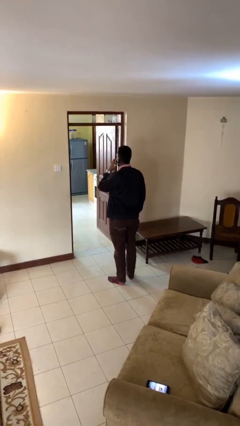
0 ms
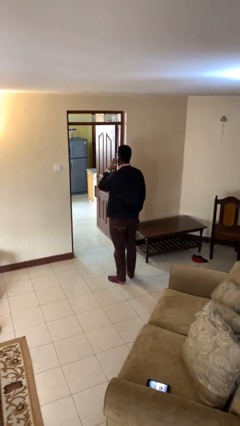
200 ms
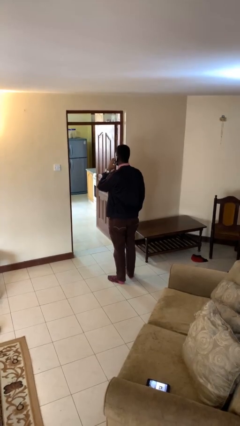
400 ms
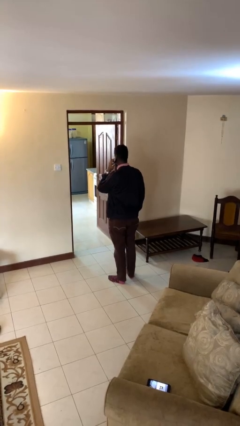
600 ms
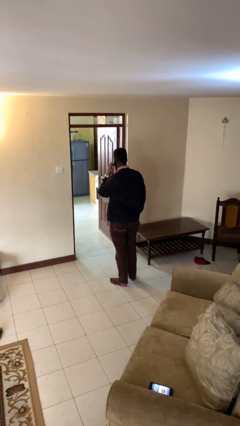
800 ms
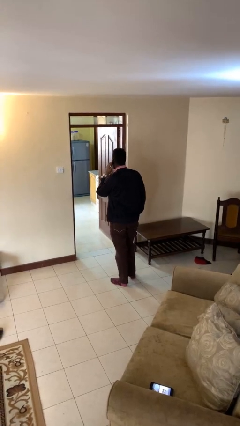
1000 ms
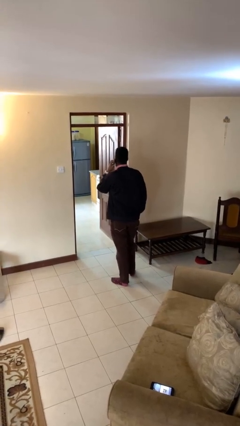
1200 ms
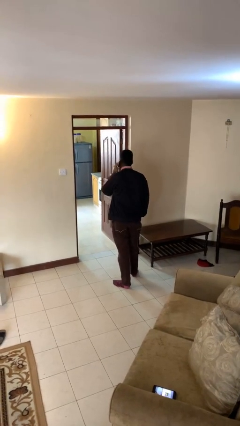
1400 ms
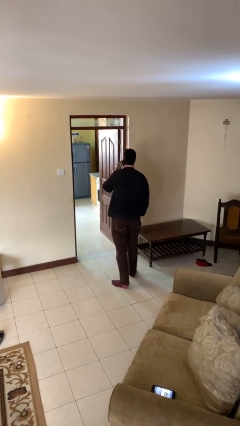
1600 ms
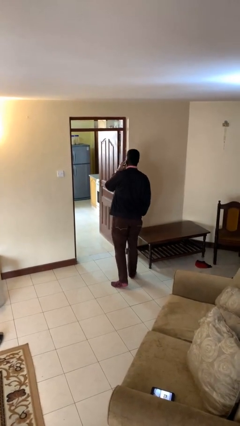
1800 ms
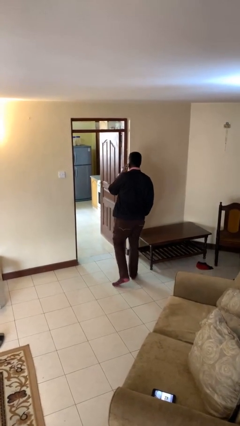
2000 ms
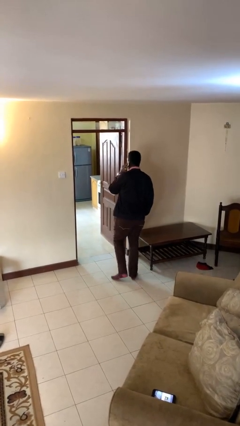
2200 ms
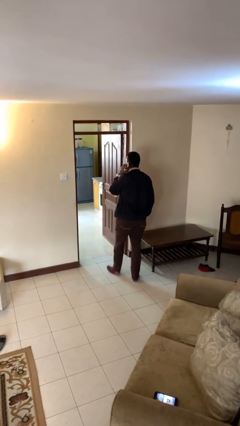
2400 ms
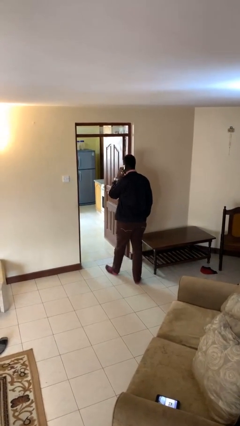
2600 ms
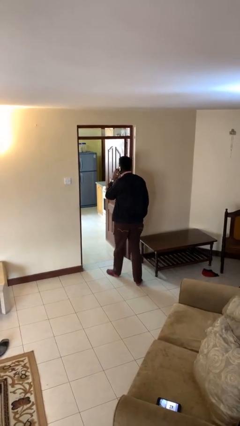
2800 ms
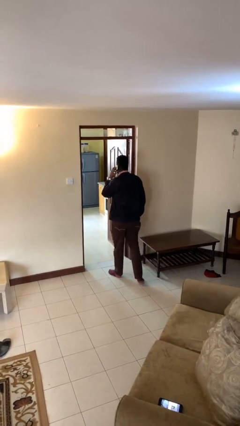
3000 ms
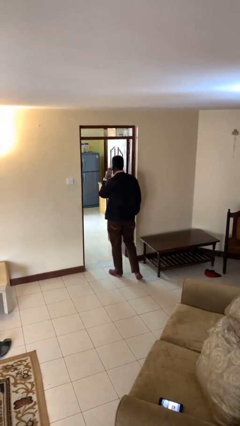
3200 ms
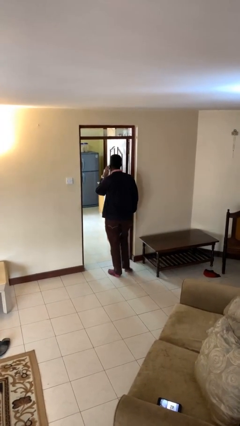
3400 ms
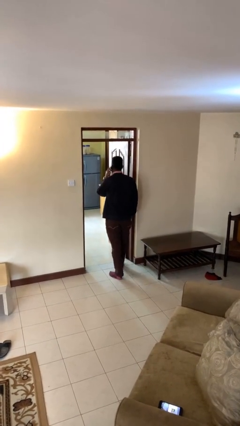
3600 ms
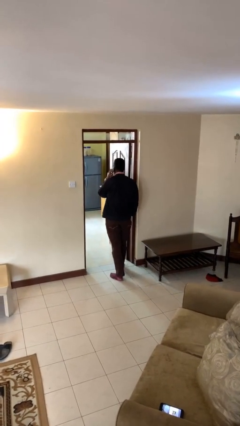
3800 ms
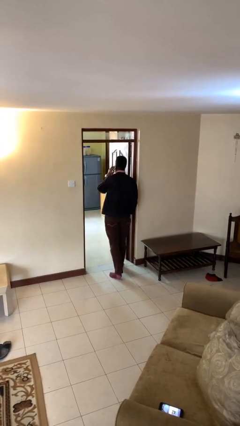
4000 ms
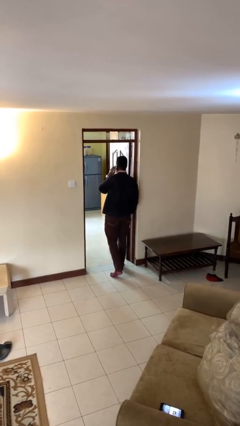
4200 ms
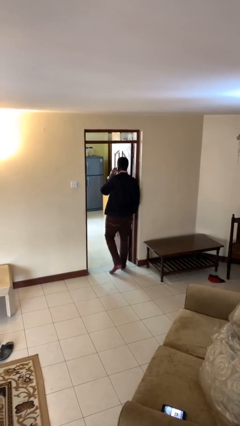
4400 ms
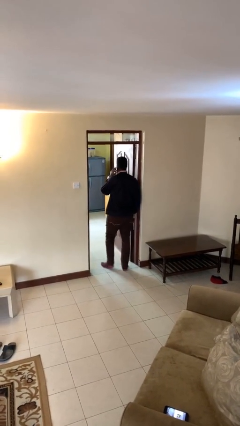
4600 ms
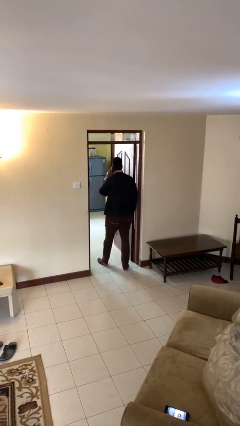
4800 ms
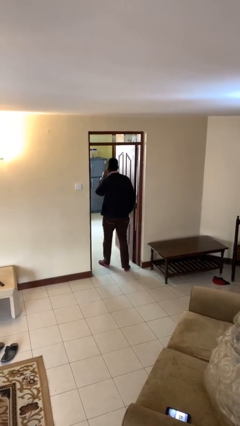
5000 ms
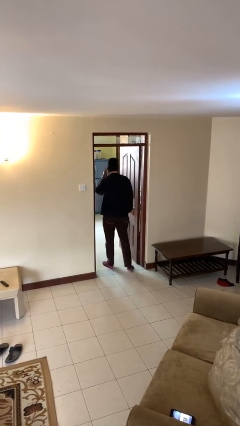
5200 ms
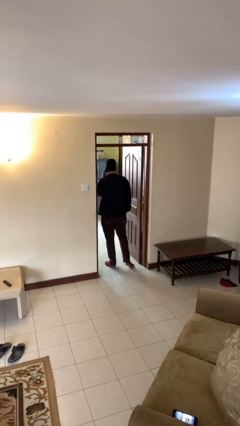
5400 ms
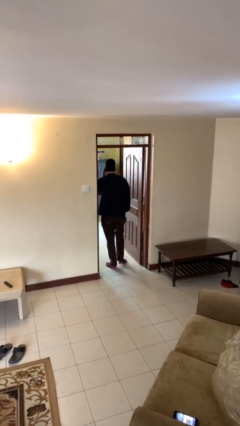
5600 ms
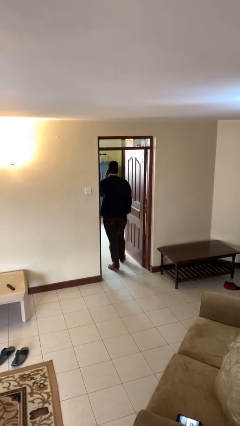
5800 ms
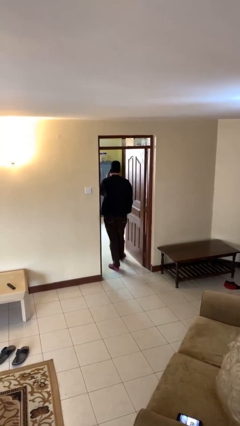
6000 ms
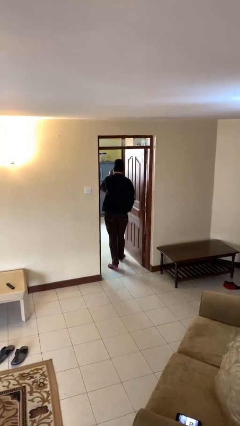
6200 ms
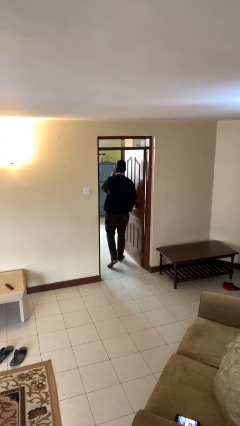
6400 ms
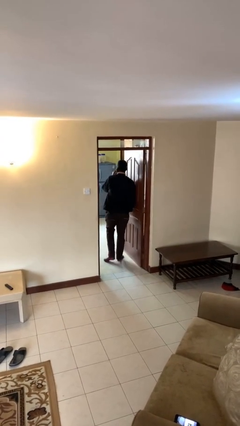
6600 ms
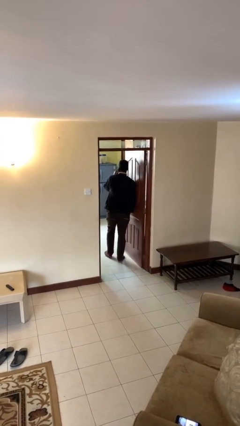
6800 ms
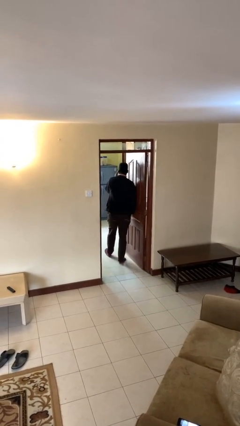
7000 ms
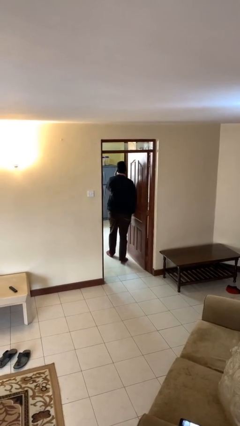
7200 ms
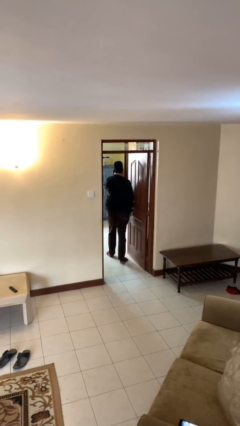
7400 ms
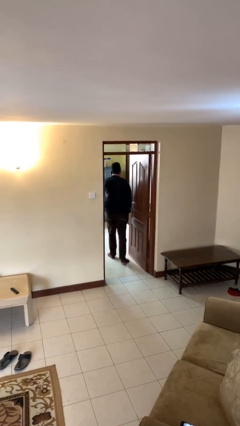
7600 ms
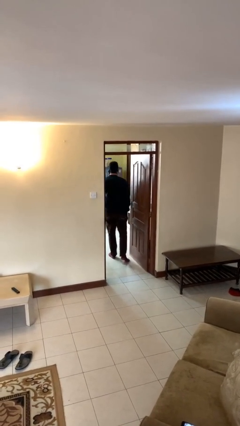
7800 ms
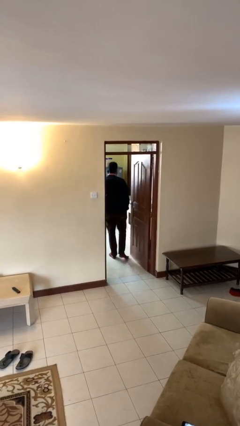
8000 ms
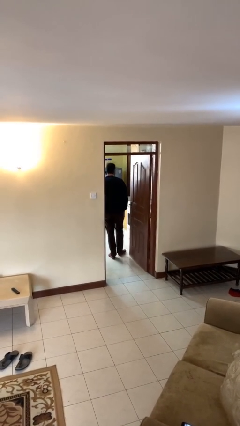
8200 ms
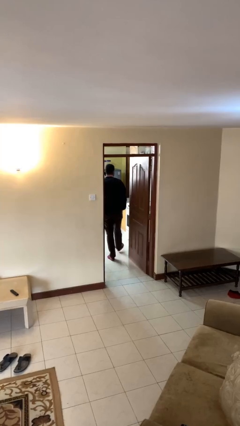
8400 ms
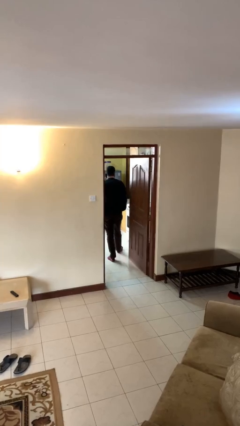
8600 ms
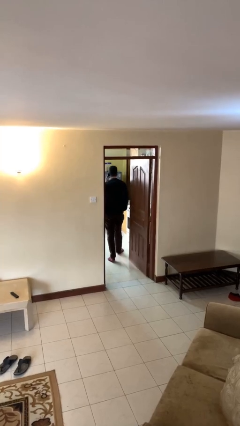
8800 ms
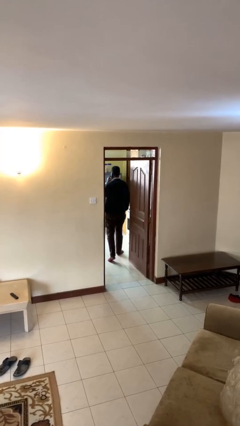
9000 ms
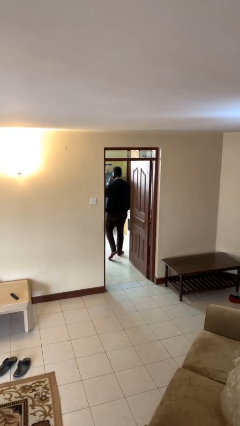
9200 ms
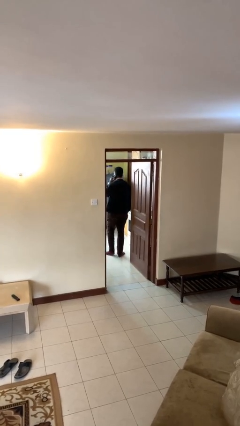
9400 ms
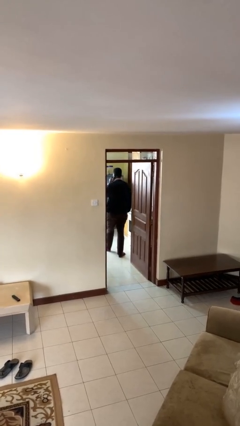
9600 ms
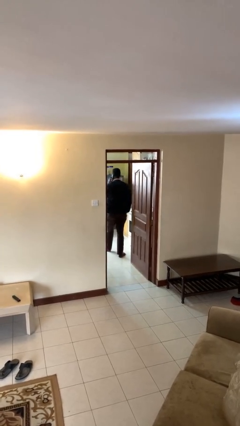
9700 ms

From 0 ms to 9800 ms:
person exits scene through structure

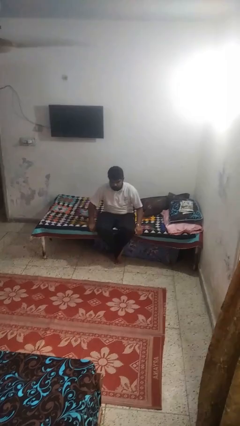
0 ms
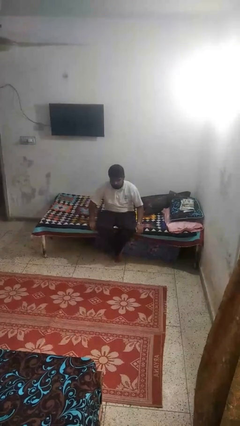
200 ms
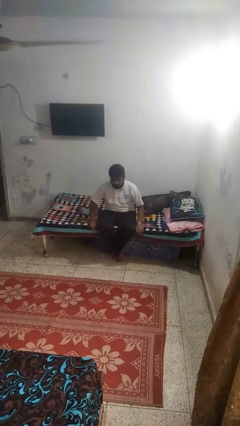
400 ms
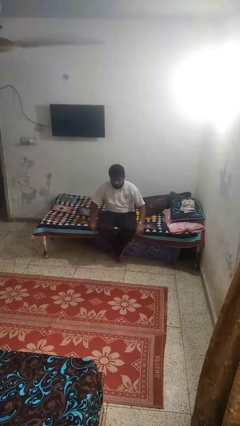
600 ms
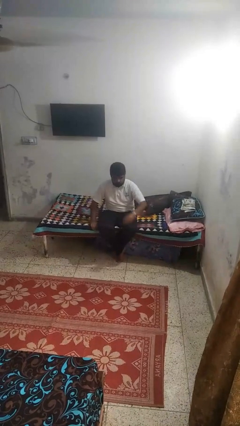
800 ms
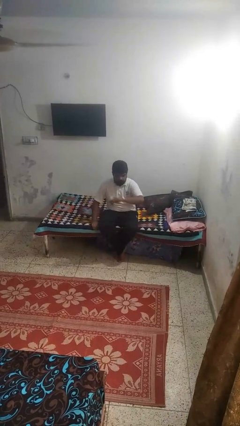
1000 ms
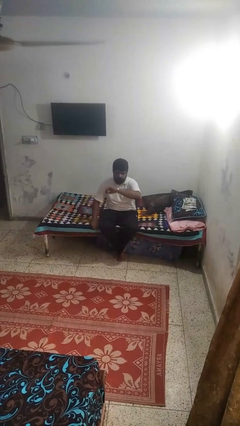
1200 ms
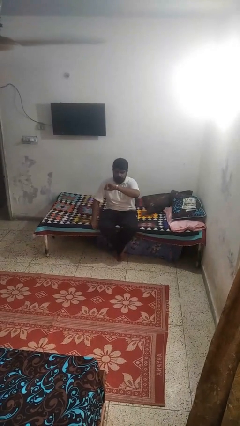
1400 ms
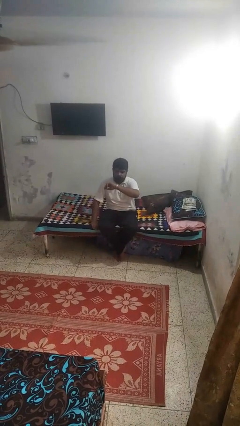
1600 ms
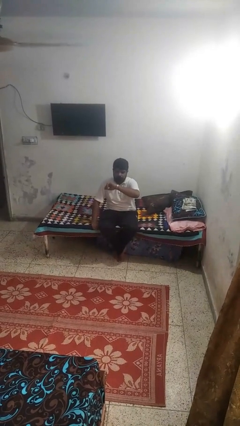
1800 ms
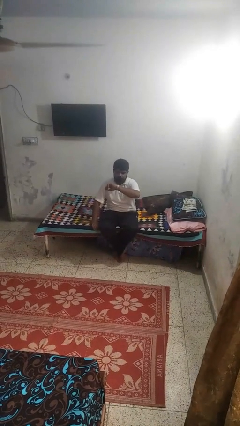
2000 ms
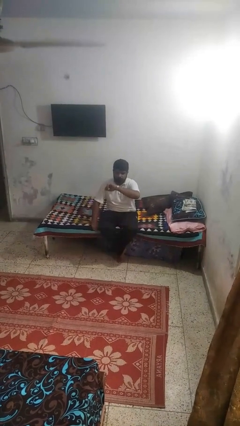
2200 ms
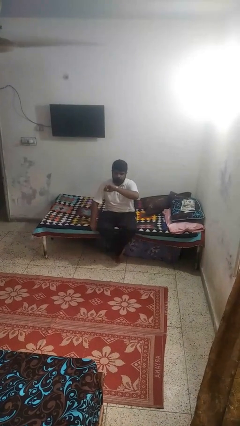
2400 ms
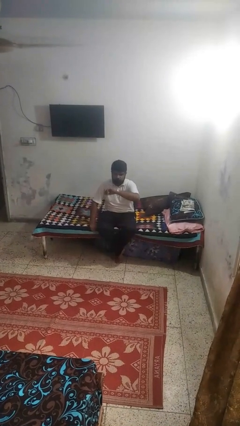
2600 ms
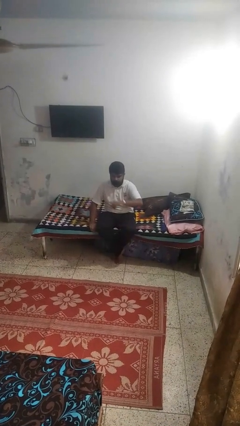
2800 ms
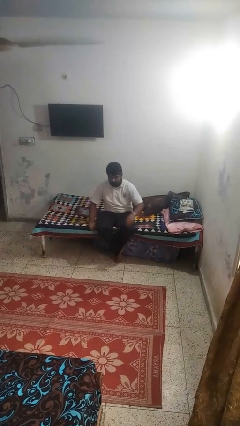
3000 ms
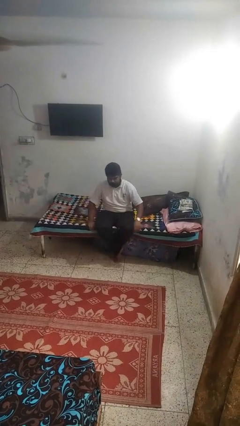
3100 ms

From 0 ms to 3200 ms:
person looks at wristwatch

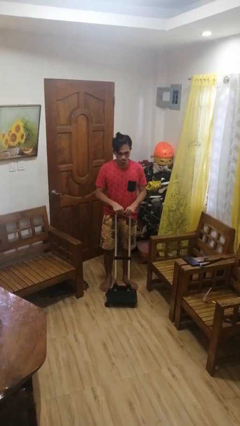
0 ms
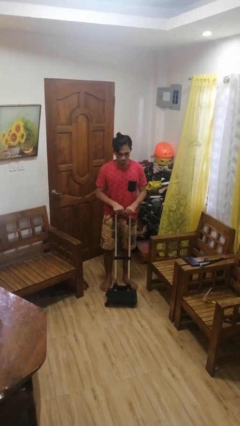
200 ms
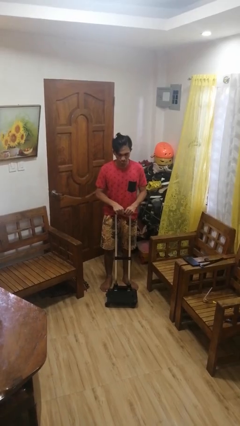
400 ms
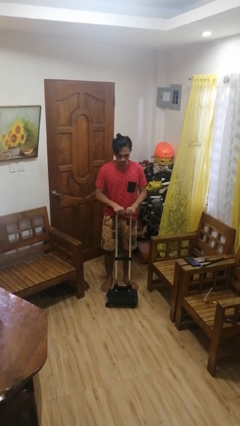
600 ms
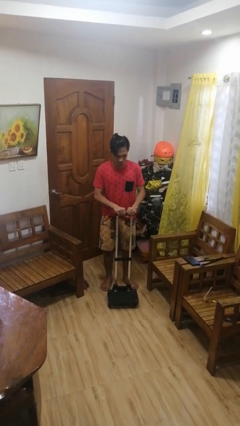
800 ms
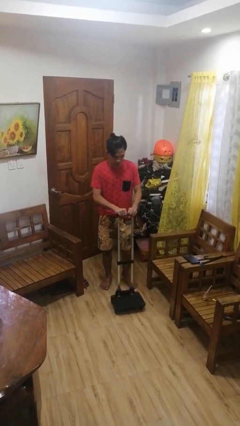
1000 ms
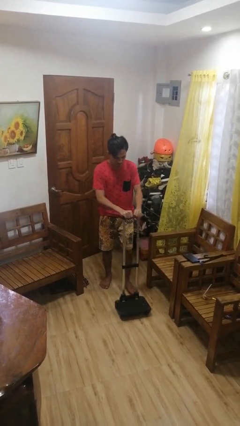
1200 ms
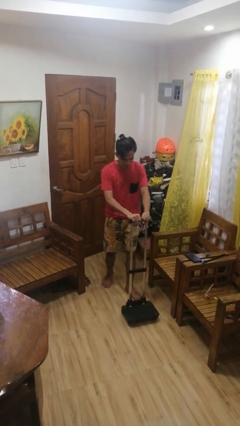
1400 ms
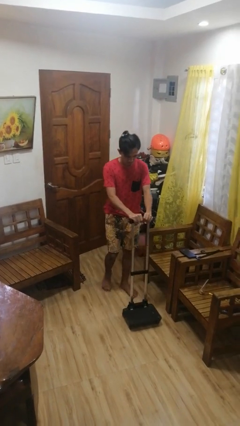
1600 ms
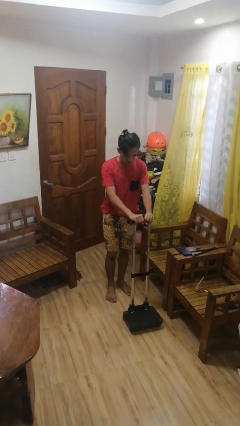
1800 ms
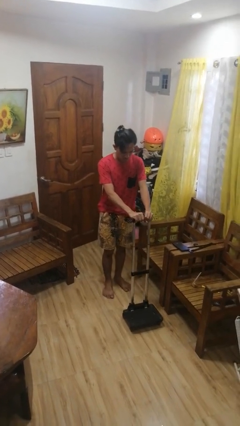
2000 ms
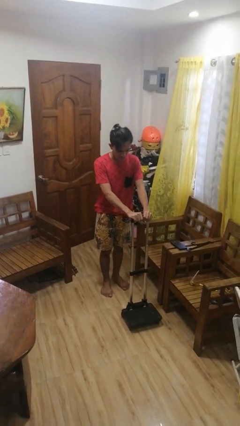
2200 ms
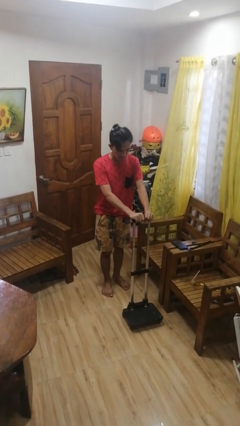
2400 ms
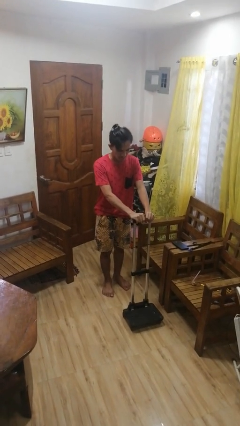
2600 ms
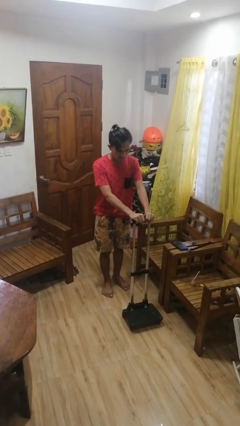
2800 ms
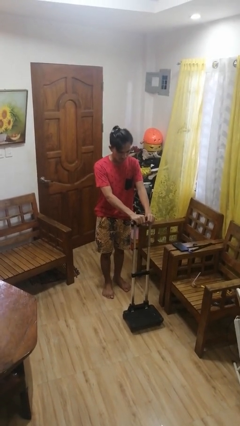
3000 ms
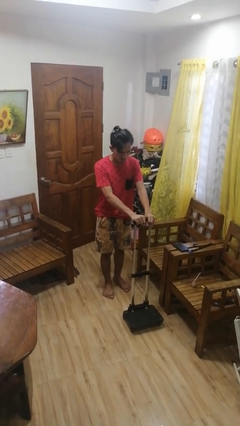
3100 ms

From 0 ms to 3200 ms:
person pushes wheeled cart

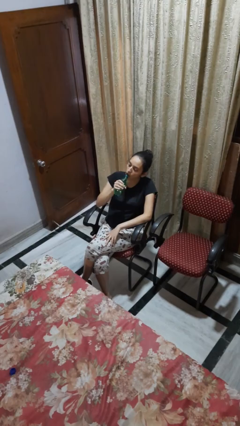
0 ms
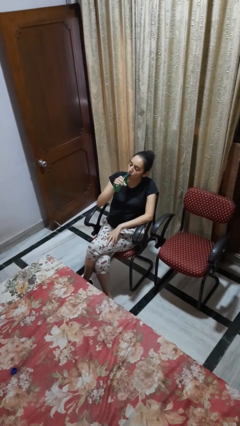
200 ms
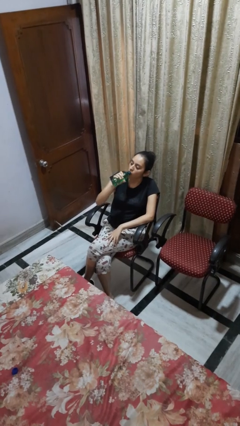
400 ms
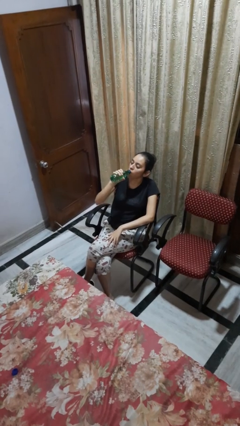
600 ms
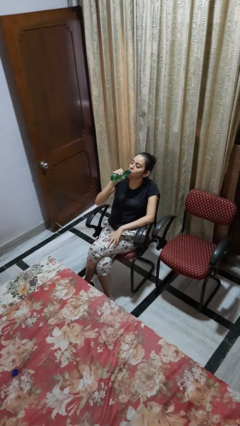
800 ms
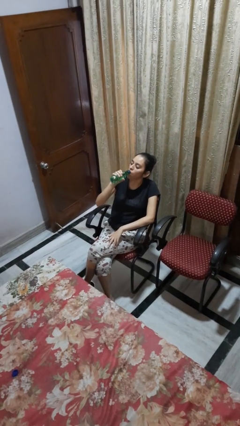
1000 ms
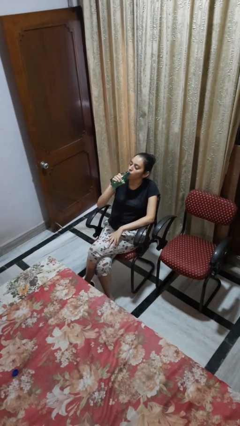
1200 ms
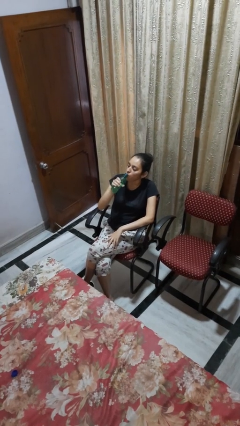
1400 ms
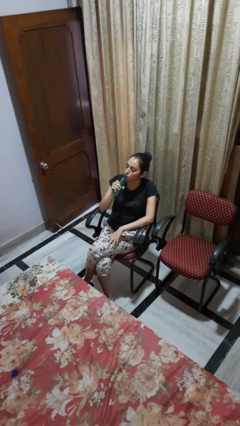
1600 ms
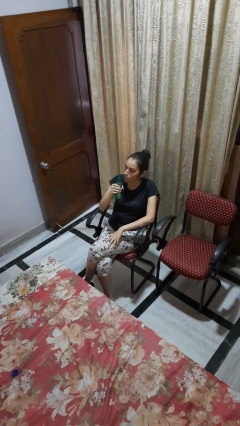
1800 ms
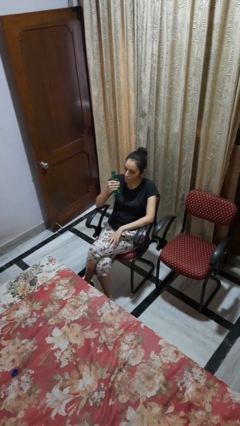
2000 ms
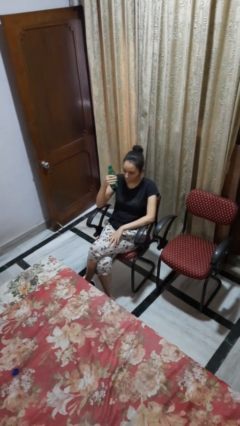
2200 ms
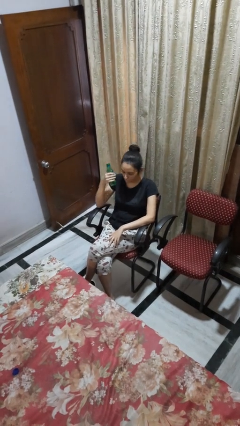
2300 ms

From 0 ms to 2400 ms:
person drinks from bottle
